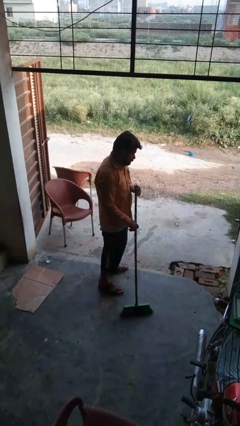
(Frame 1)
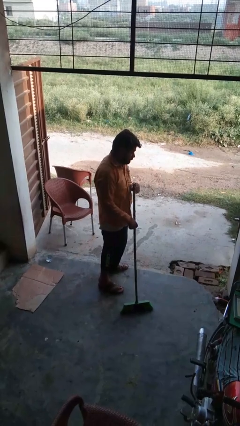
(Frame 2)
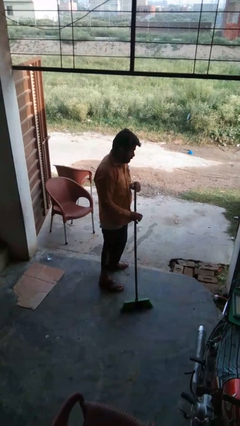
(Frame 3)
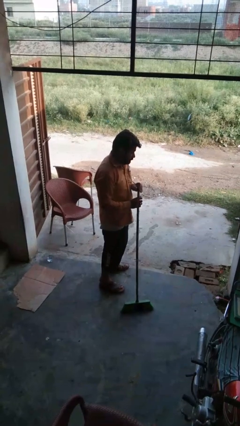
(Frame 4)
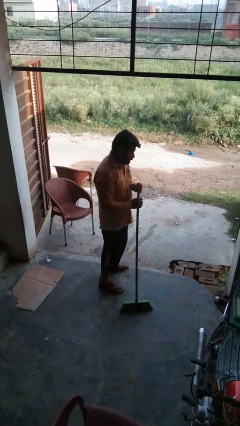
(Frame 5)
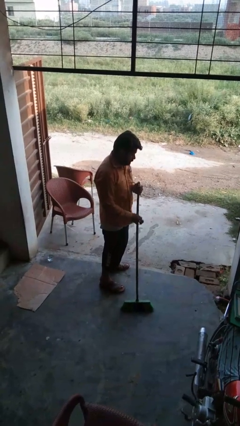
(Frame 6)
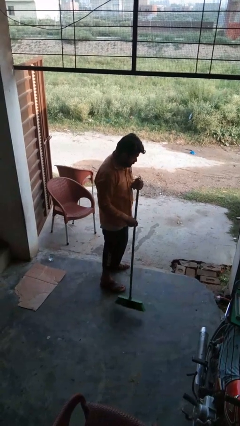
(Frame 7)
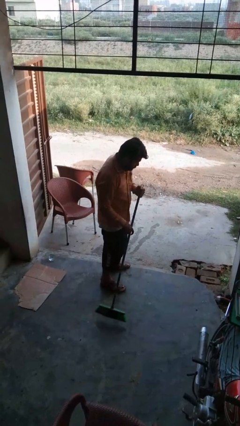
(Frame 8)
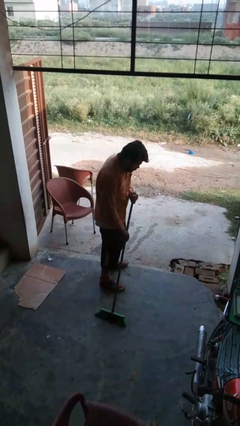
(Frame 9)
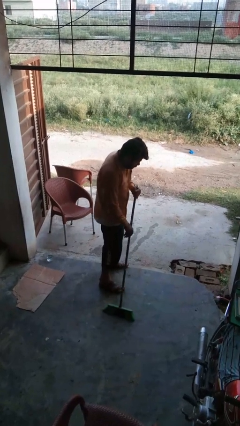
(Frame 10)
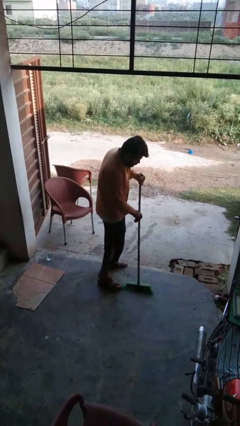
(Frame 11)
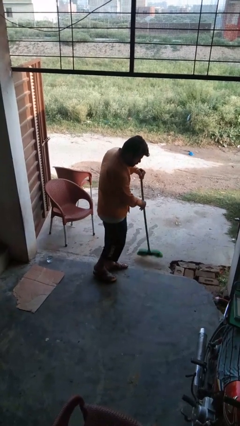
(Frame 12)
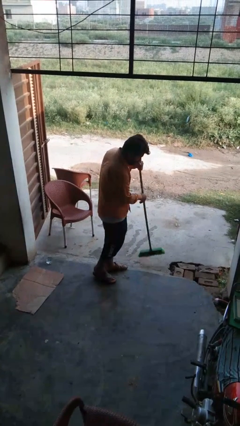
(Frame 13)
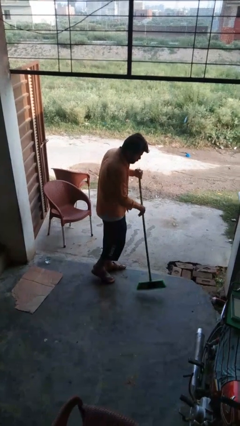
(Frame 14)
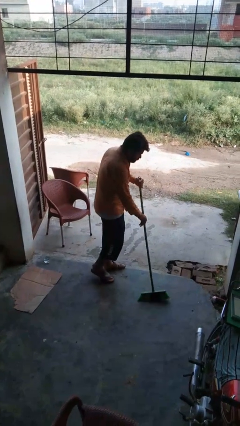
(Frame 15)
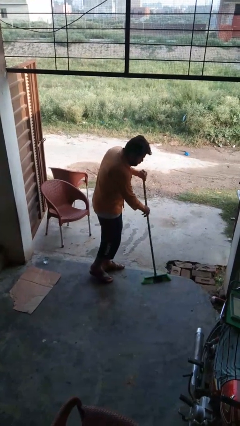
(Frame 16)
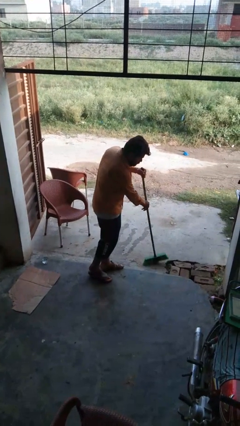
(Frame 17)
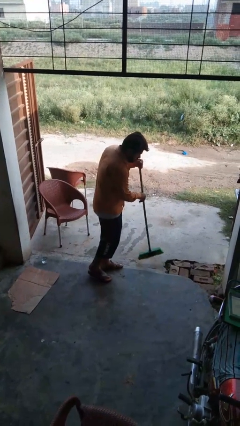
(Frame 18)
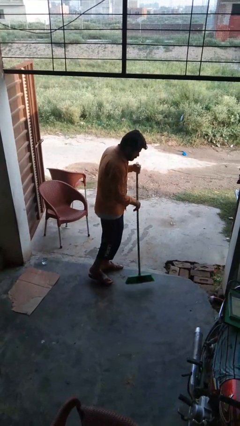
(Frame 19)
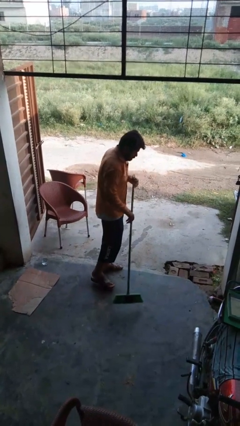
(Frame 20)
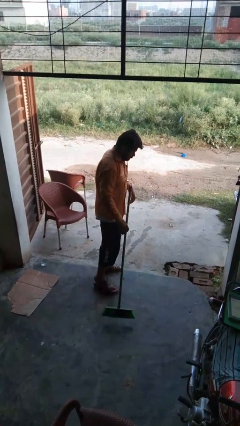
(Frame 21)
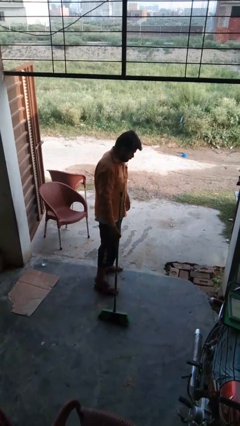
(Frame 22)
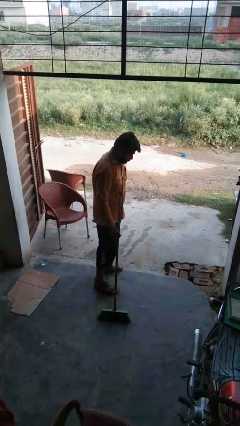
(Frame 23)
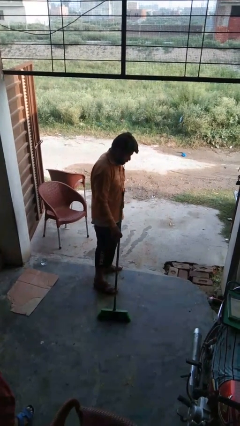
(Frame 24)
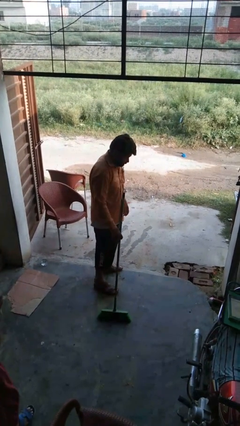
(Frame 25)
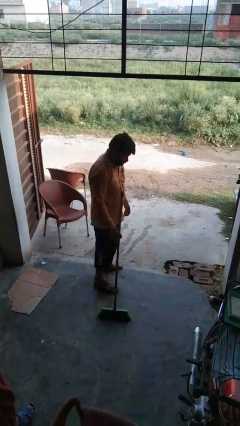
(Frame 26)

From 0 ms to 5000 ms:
person mops

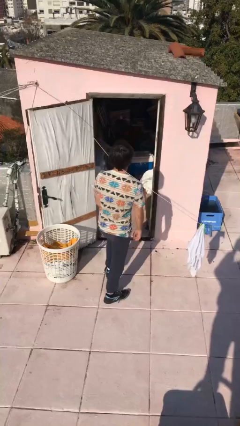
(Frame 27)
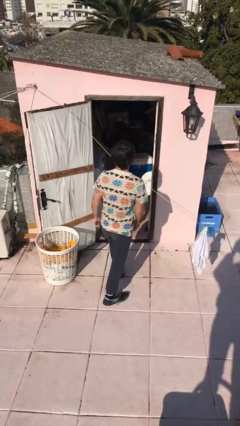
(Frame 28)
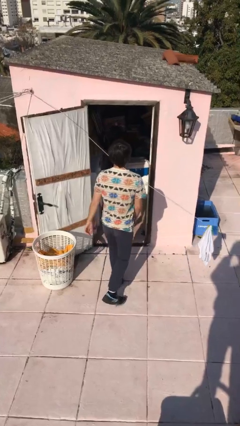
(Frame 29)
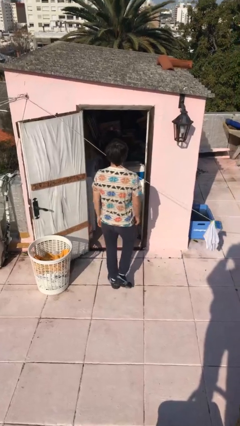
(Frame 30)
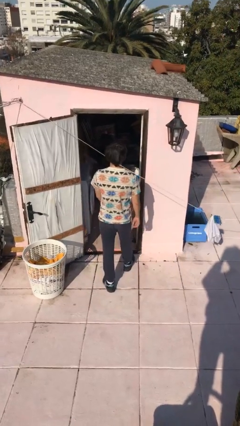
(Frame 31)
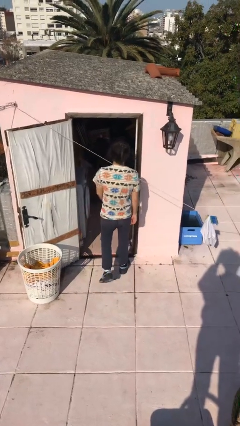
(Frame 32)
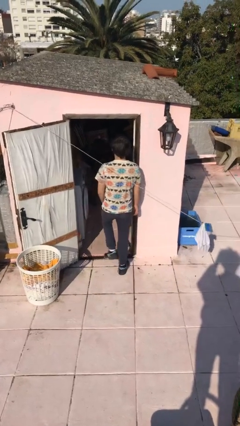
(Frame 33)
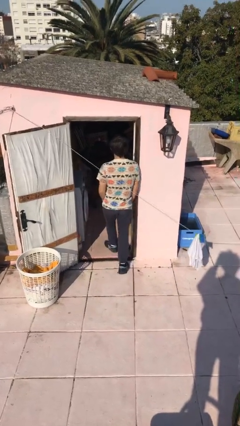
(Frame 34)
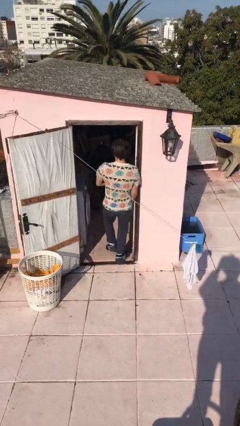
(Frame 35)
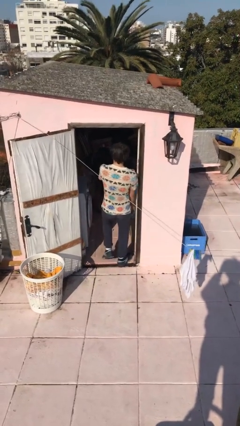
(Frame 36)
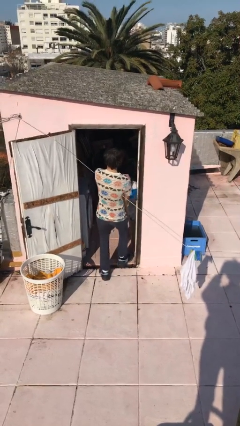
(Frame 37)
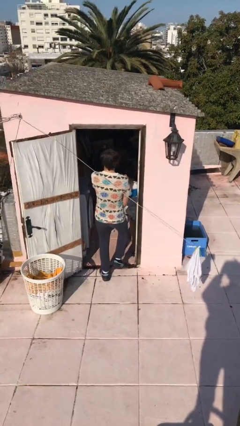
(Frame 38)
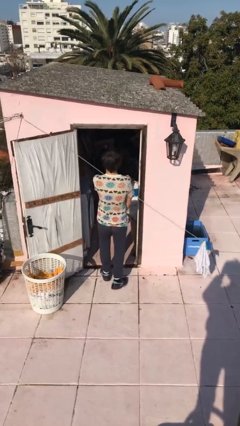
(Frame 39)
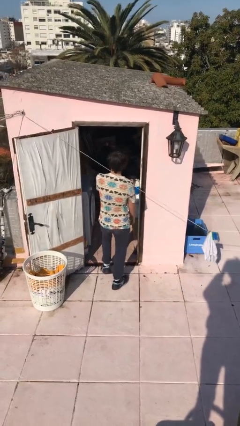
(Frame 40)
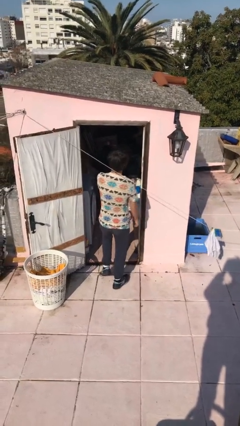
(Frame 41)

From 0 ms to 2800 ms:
person bumps into wall

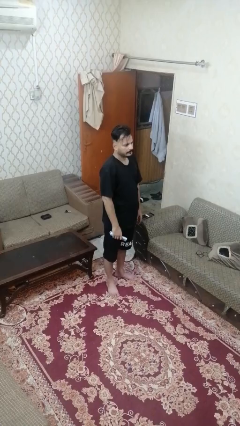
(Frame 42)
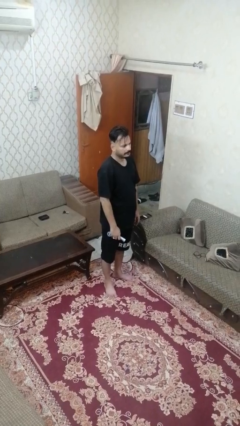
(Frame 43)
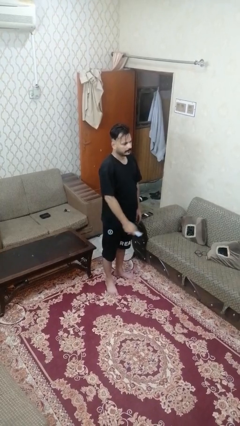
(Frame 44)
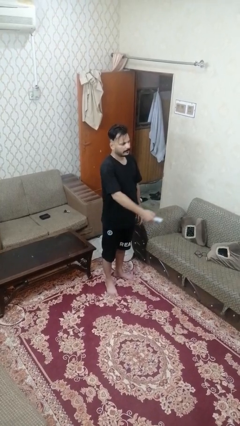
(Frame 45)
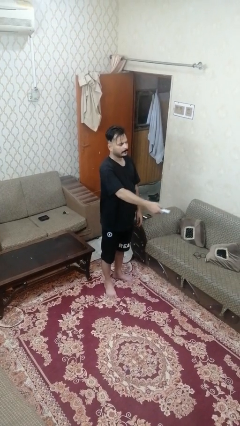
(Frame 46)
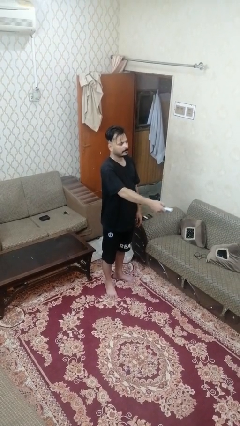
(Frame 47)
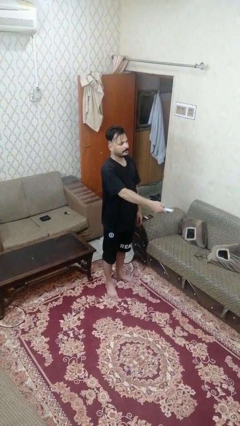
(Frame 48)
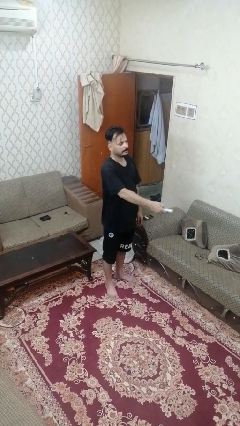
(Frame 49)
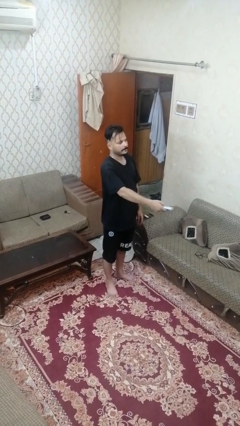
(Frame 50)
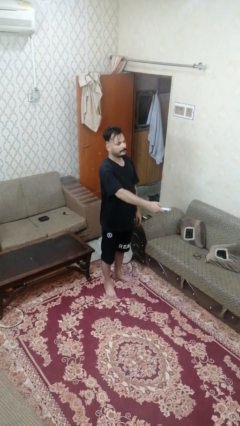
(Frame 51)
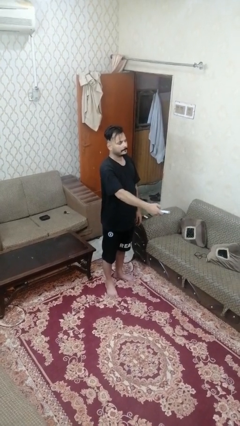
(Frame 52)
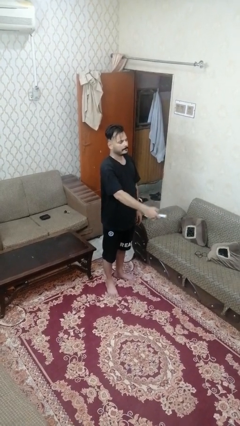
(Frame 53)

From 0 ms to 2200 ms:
person uses television remote

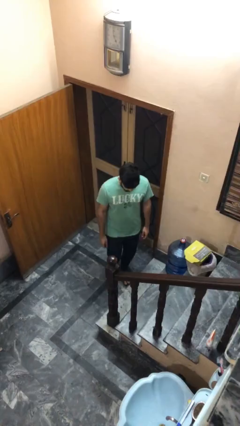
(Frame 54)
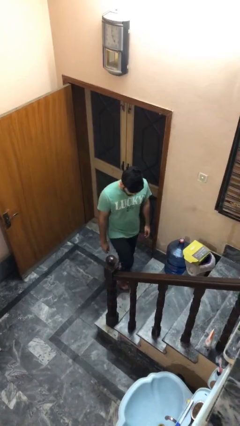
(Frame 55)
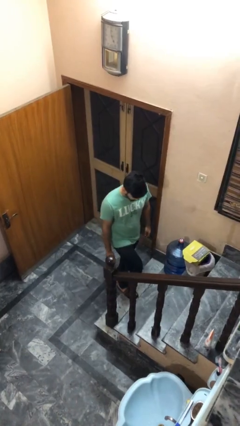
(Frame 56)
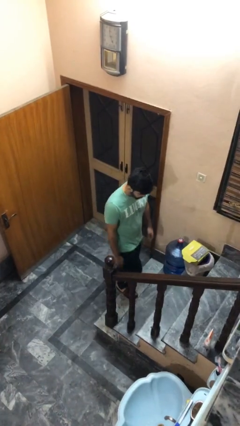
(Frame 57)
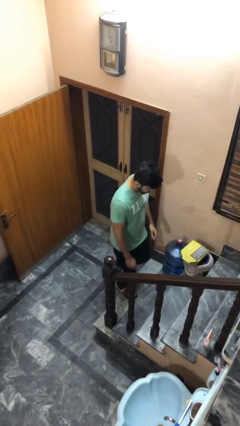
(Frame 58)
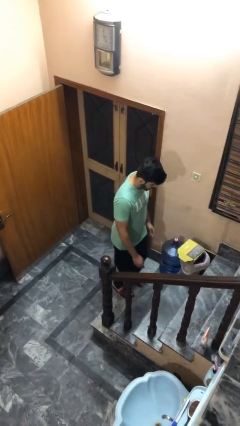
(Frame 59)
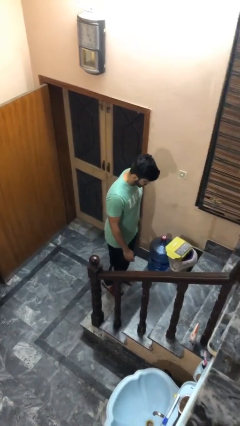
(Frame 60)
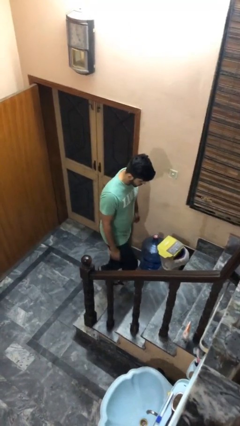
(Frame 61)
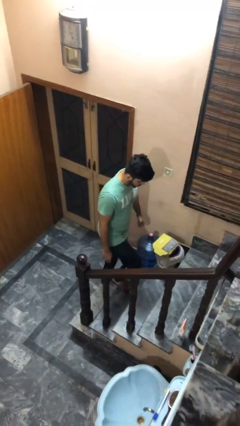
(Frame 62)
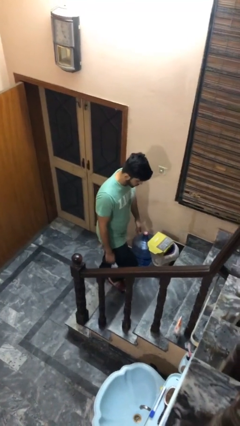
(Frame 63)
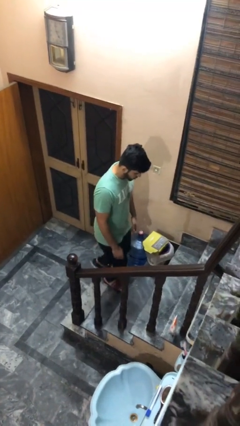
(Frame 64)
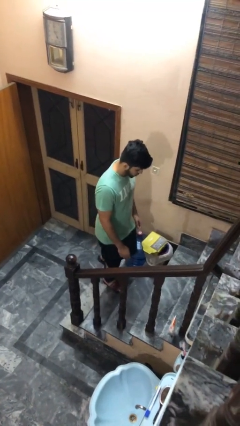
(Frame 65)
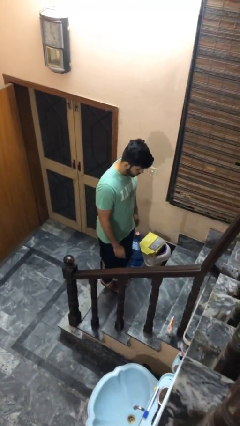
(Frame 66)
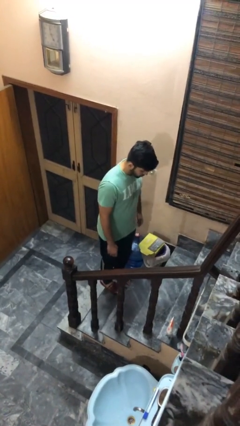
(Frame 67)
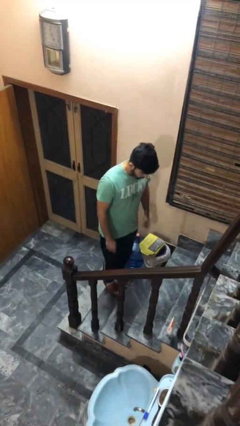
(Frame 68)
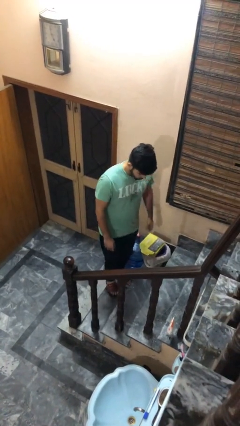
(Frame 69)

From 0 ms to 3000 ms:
person climbs up stairs

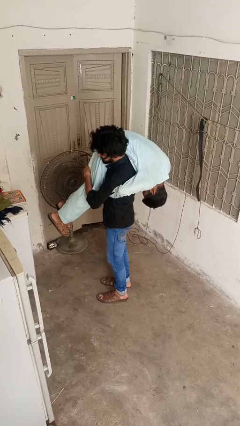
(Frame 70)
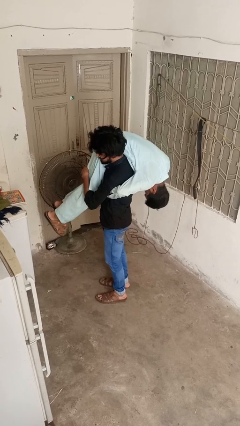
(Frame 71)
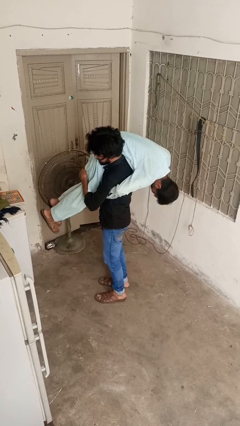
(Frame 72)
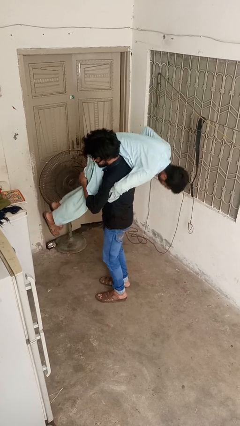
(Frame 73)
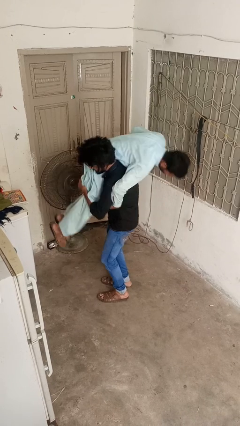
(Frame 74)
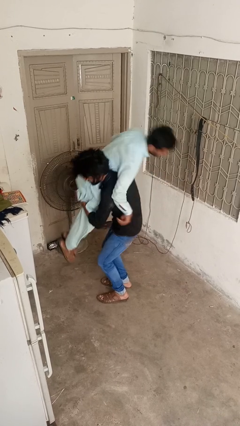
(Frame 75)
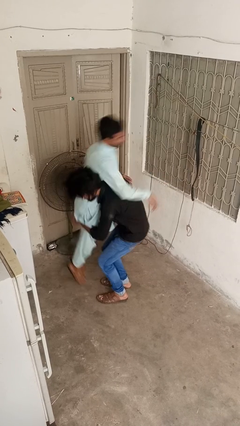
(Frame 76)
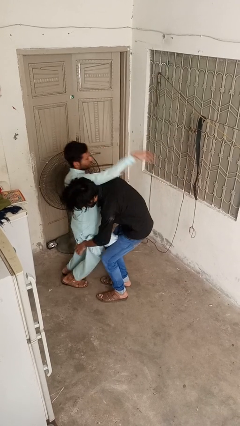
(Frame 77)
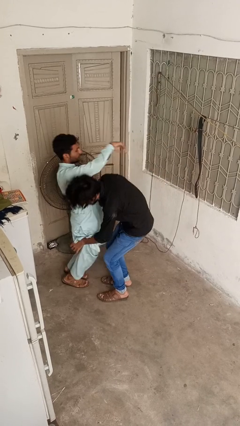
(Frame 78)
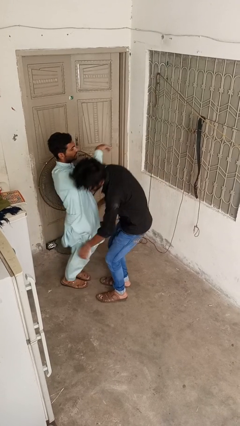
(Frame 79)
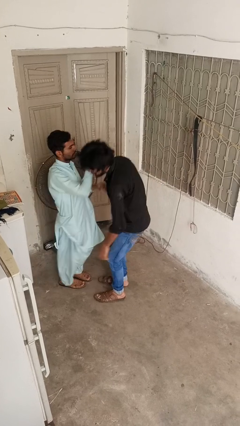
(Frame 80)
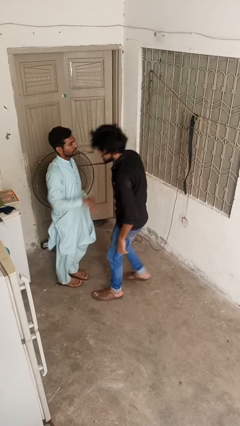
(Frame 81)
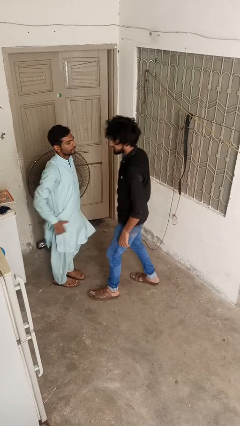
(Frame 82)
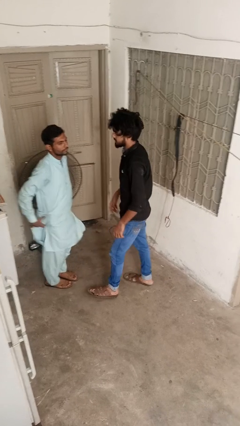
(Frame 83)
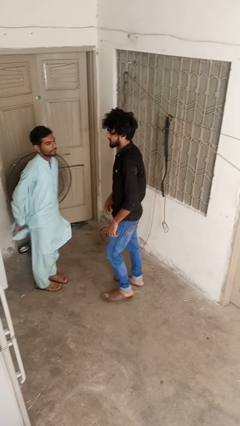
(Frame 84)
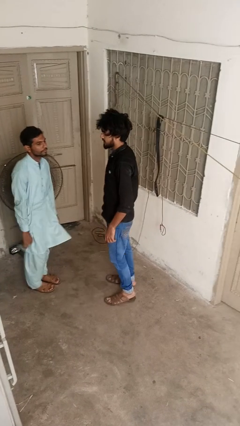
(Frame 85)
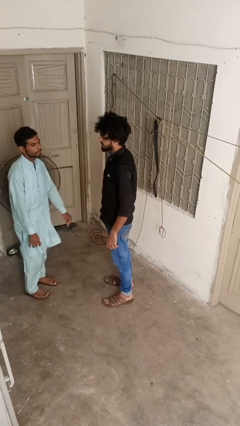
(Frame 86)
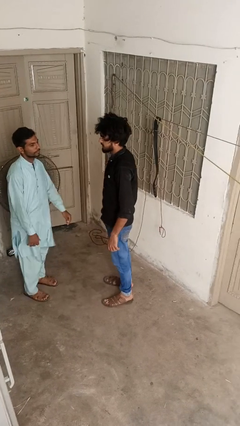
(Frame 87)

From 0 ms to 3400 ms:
person puts down person

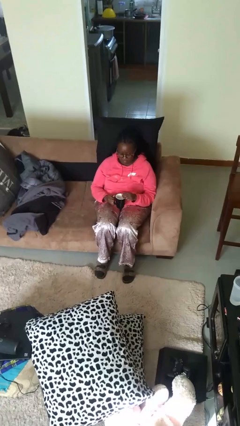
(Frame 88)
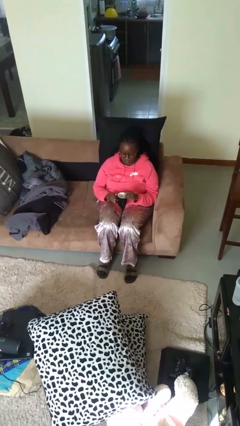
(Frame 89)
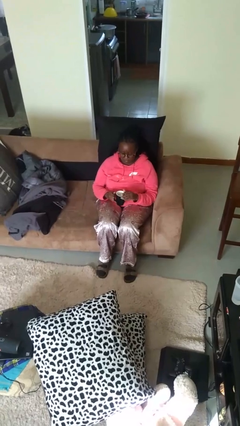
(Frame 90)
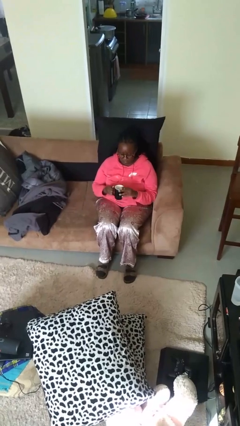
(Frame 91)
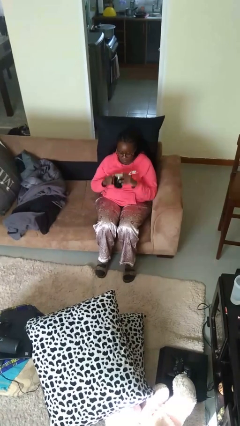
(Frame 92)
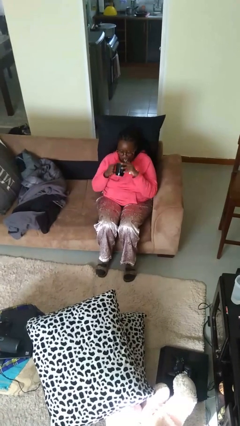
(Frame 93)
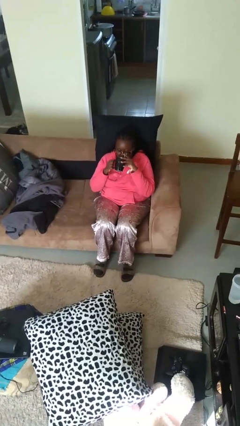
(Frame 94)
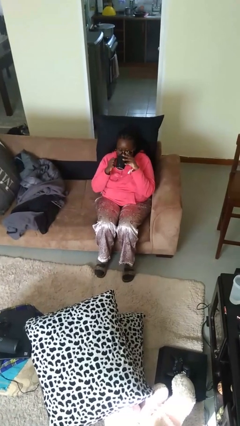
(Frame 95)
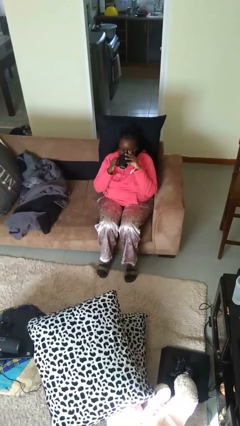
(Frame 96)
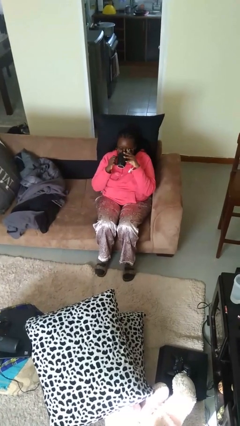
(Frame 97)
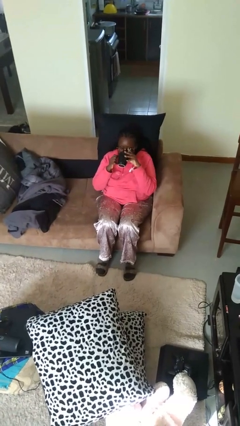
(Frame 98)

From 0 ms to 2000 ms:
person drinks from mug
